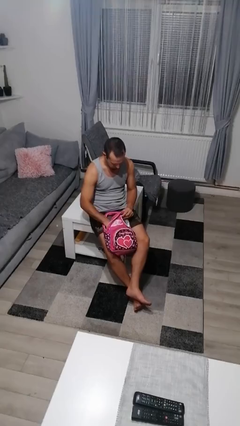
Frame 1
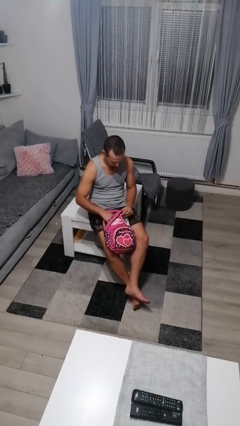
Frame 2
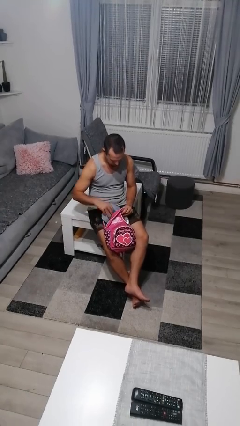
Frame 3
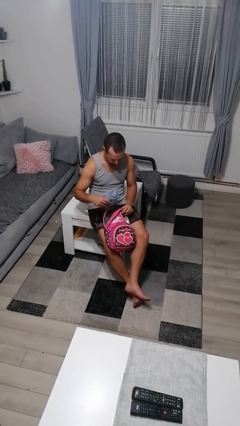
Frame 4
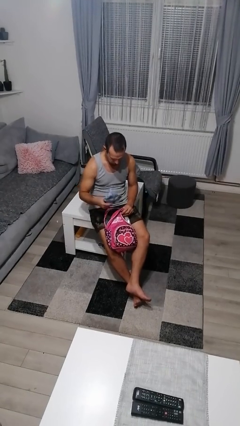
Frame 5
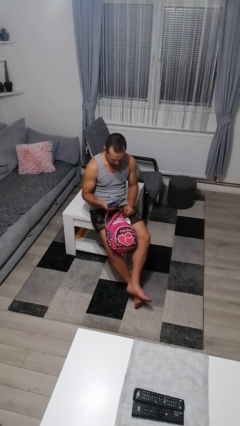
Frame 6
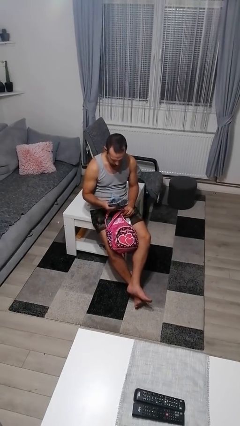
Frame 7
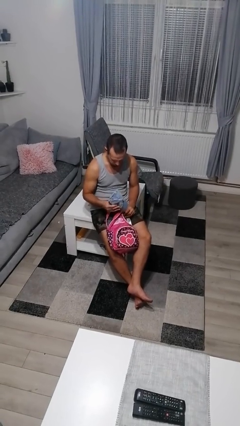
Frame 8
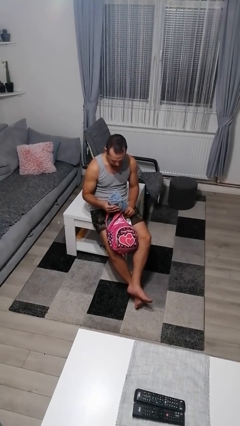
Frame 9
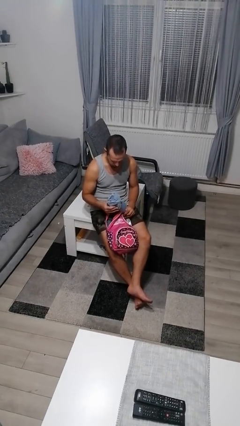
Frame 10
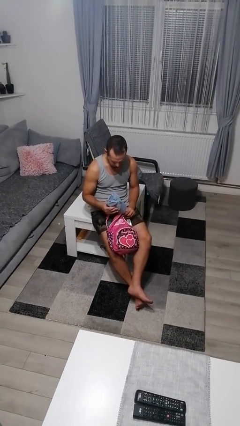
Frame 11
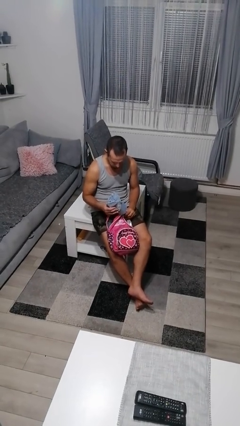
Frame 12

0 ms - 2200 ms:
person takes object from backpack

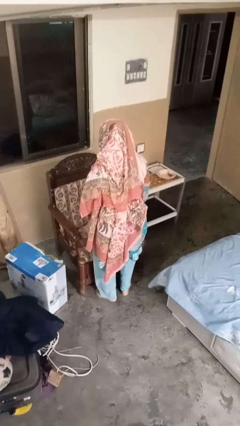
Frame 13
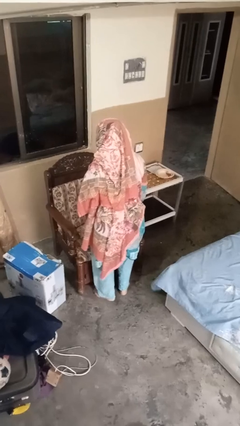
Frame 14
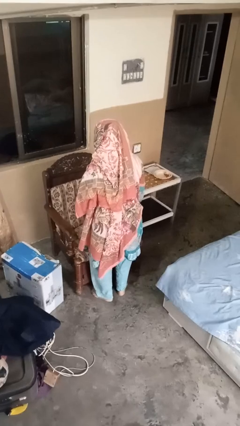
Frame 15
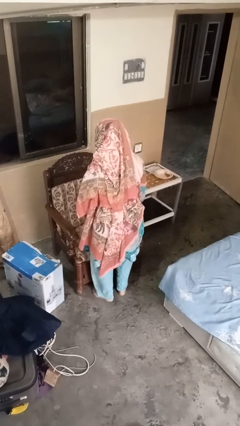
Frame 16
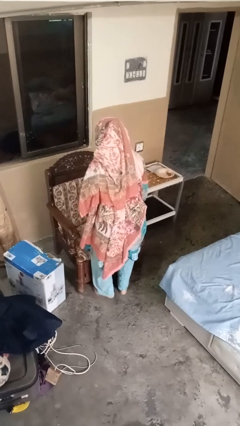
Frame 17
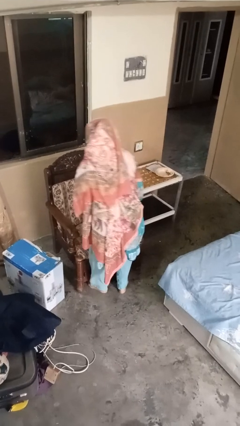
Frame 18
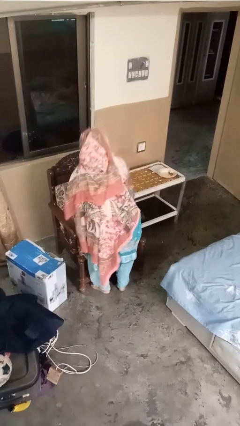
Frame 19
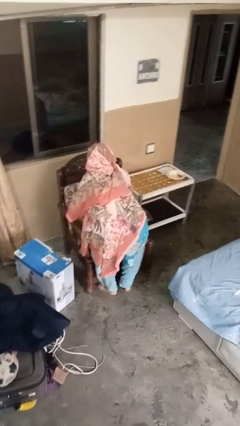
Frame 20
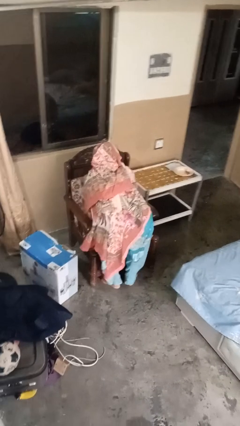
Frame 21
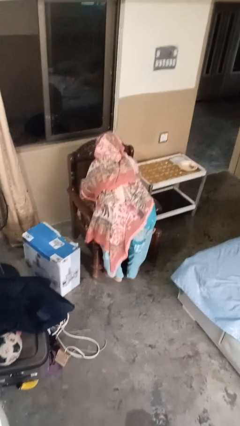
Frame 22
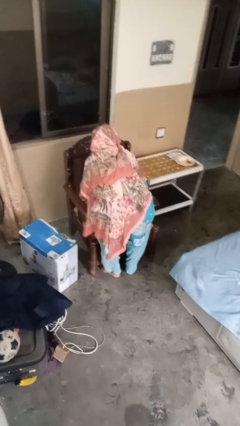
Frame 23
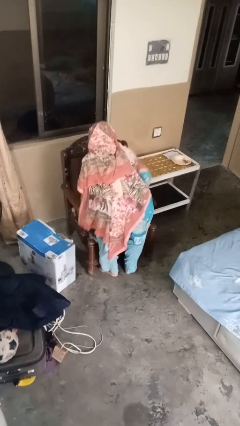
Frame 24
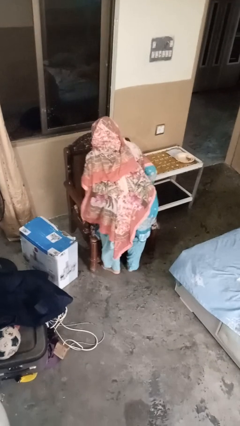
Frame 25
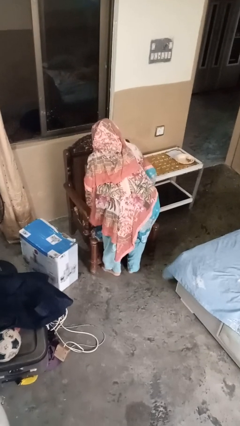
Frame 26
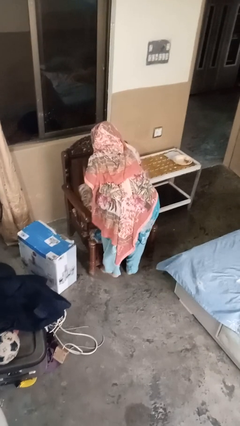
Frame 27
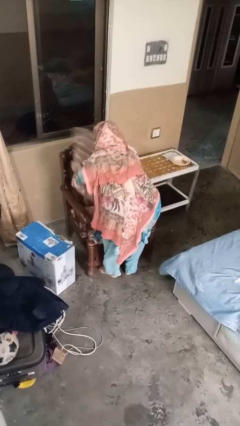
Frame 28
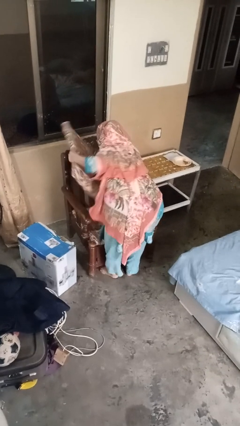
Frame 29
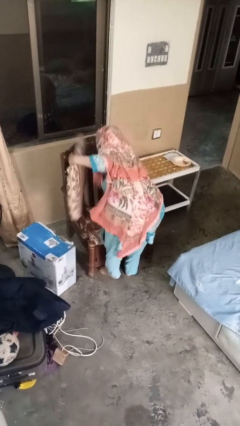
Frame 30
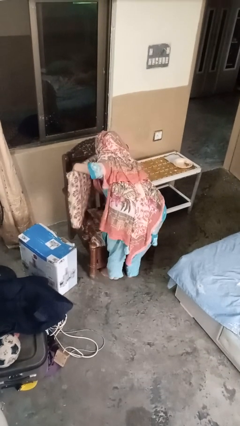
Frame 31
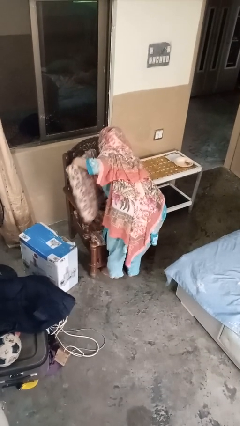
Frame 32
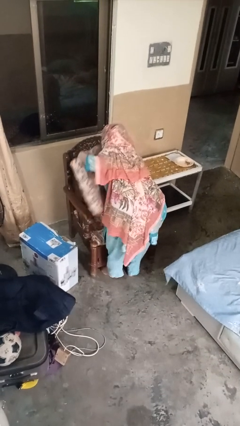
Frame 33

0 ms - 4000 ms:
person searches in couch

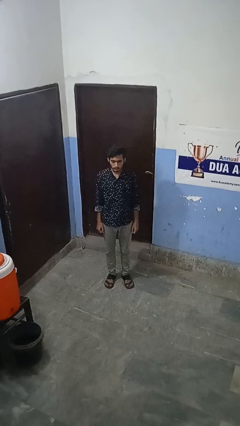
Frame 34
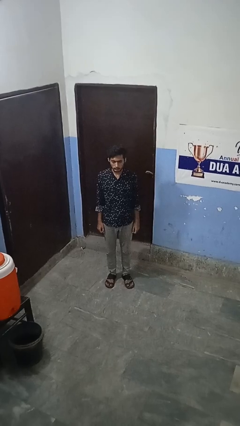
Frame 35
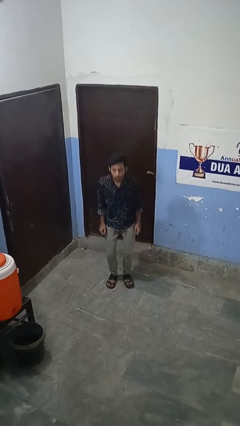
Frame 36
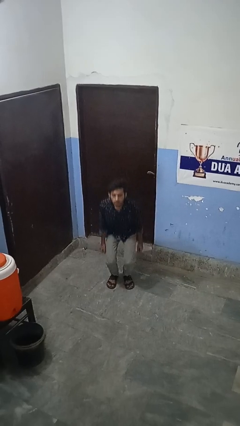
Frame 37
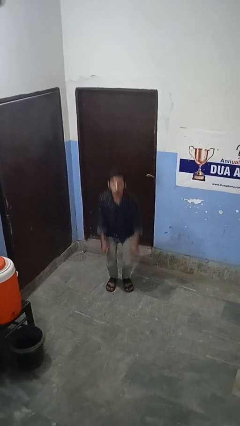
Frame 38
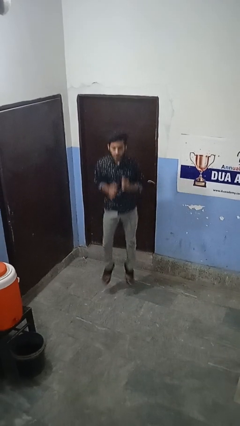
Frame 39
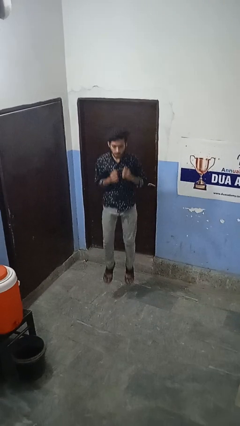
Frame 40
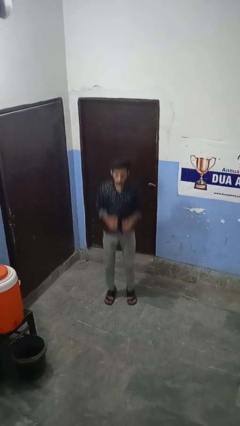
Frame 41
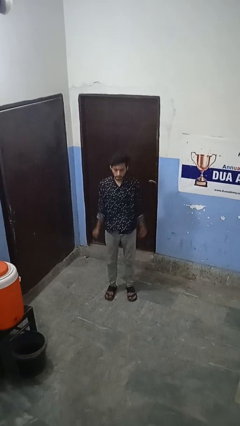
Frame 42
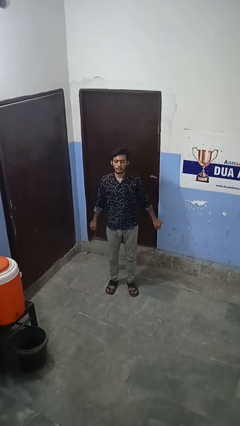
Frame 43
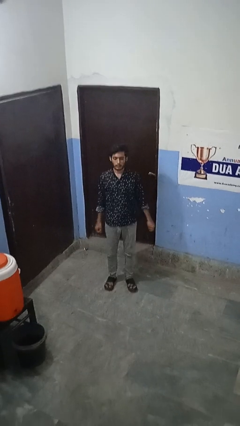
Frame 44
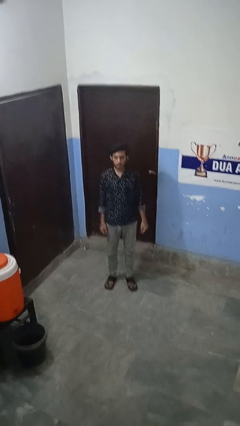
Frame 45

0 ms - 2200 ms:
person jumps

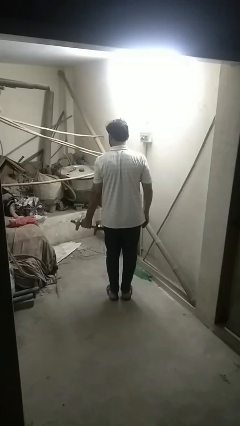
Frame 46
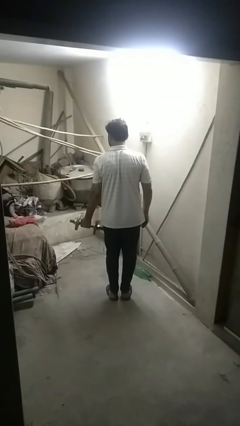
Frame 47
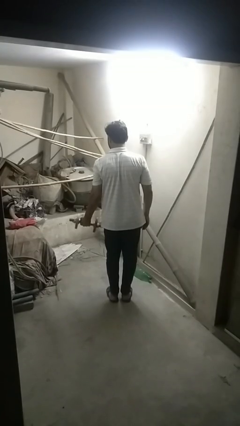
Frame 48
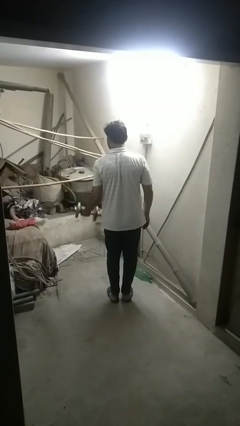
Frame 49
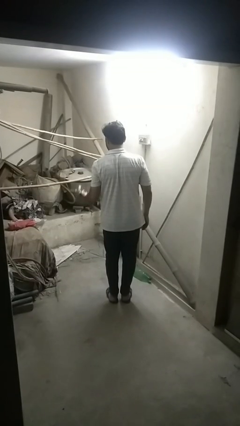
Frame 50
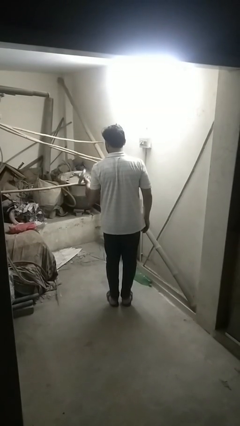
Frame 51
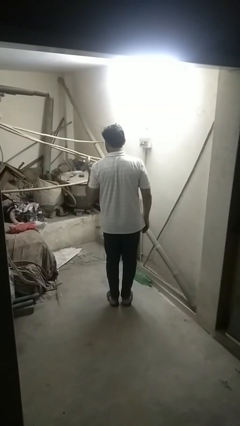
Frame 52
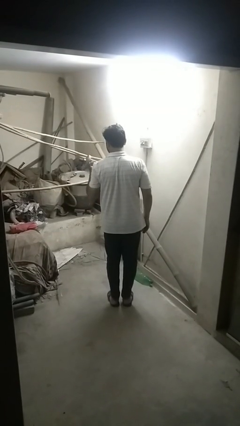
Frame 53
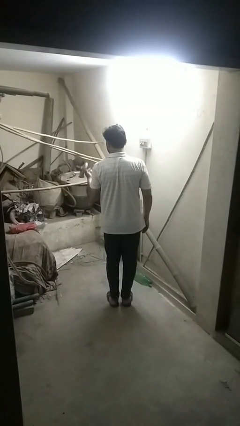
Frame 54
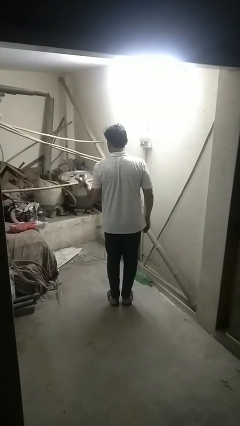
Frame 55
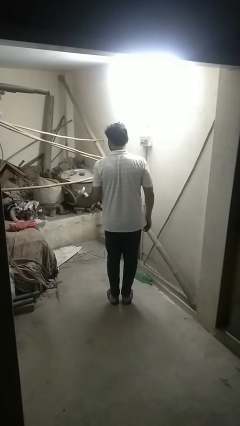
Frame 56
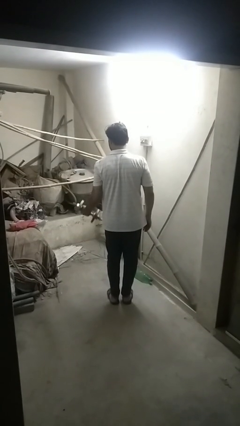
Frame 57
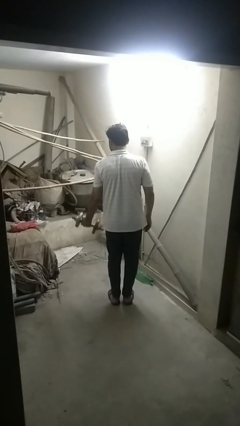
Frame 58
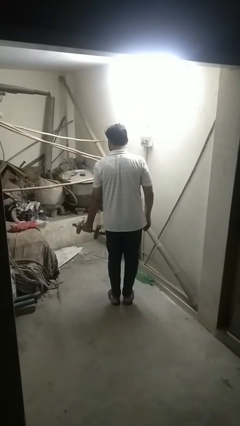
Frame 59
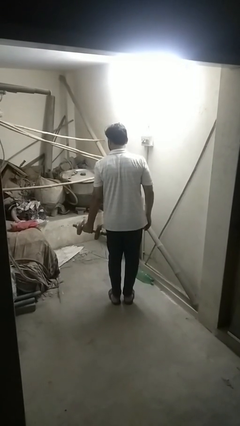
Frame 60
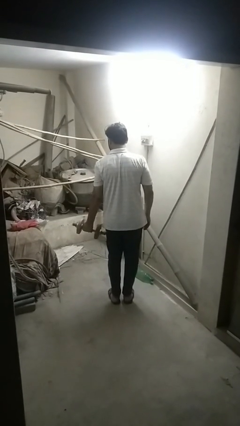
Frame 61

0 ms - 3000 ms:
person lifts dumbbells

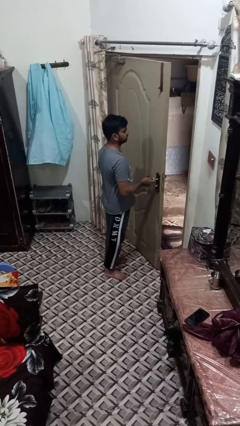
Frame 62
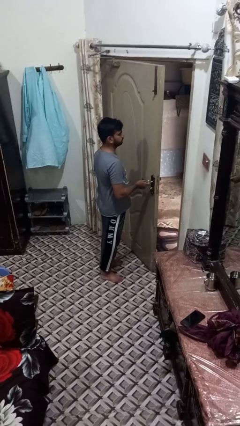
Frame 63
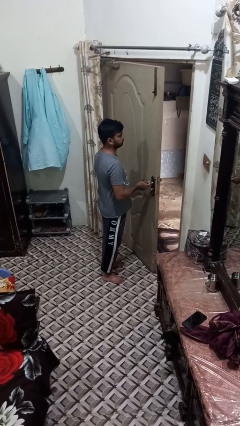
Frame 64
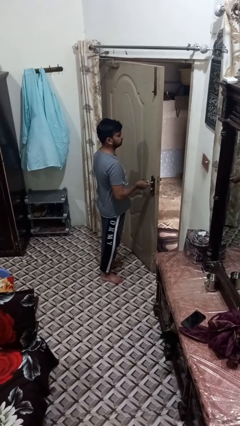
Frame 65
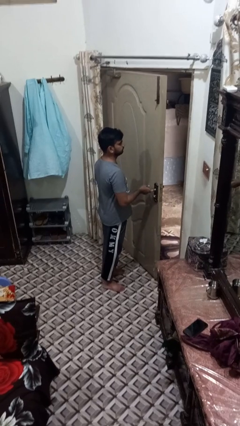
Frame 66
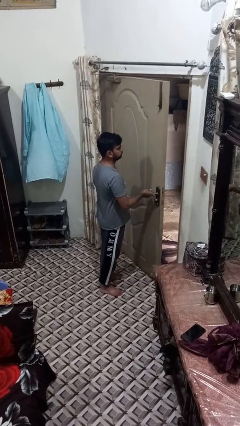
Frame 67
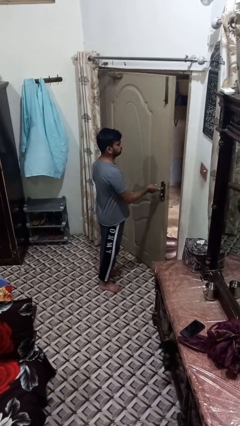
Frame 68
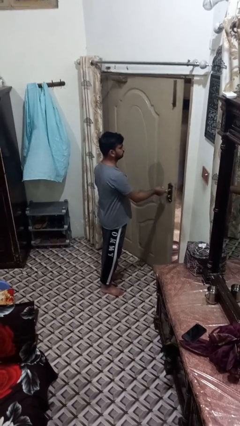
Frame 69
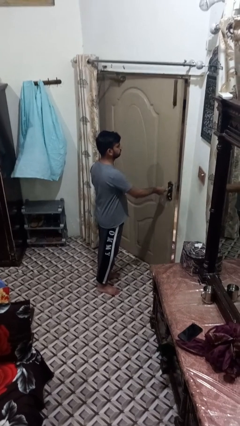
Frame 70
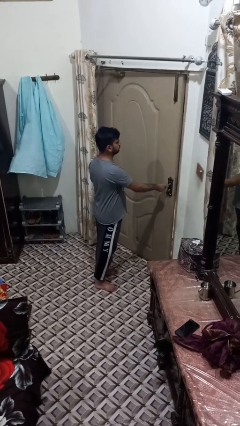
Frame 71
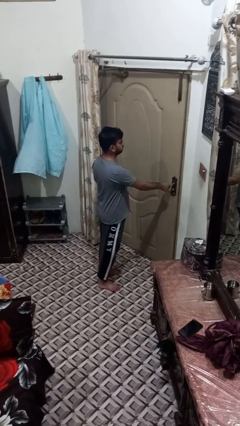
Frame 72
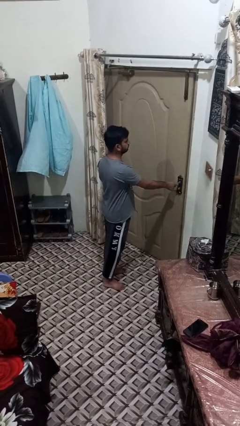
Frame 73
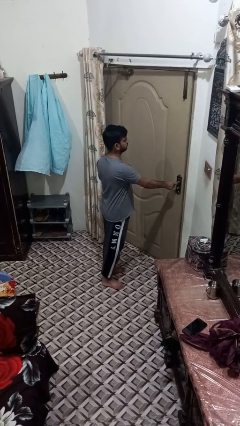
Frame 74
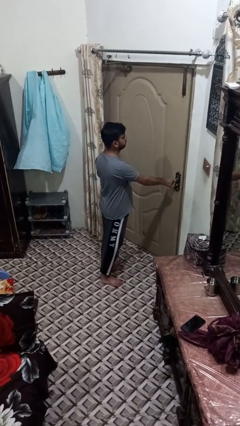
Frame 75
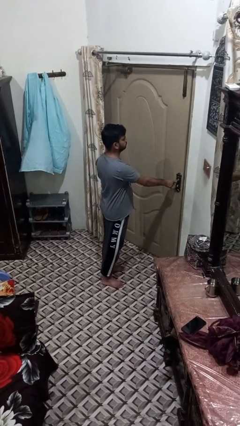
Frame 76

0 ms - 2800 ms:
person closes facility door

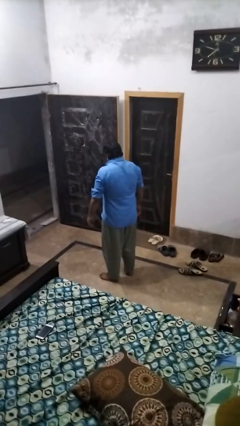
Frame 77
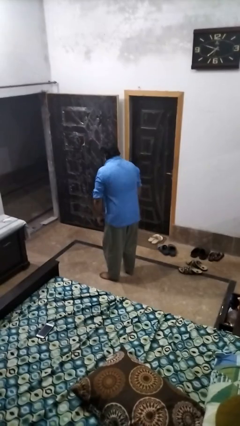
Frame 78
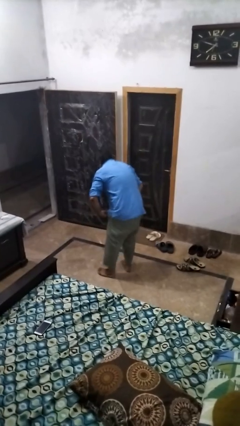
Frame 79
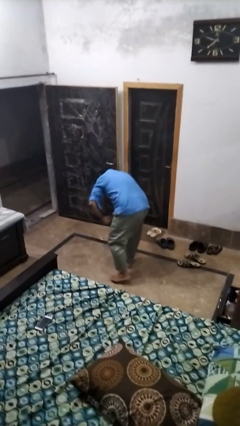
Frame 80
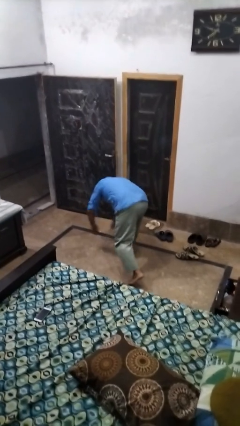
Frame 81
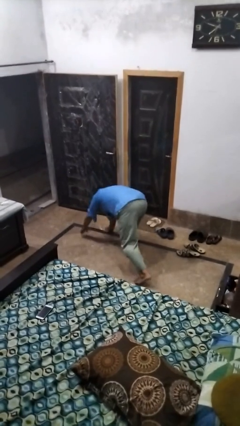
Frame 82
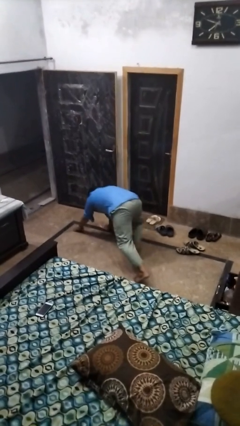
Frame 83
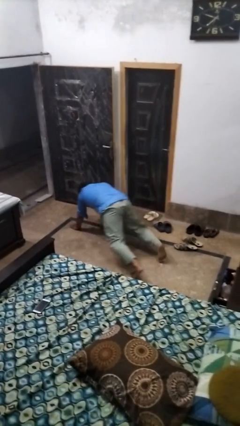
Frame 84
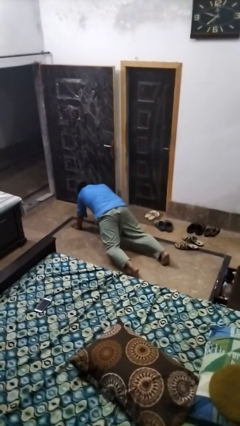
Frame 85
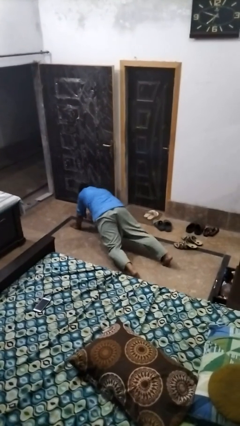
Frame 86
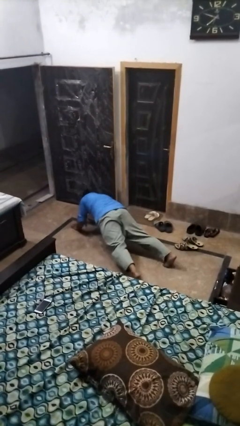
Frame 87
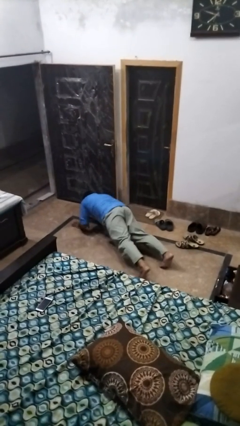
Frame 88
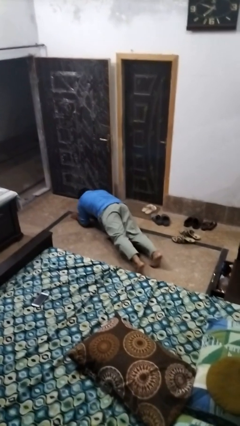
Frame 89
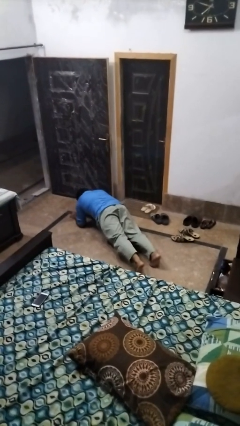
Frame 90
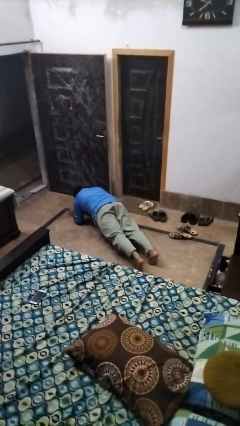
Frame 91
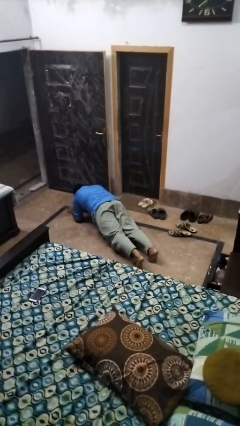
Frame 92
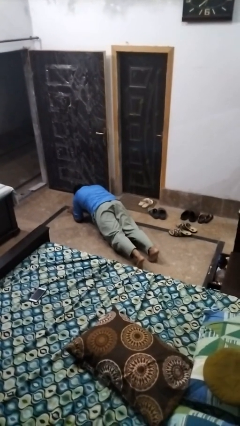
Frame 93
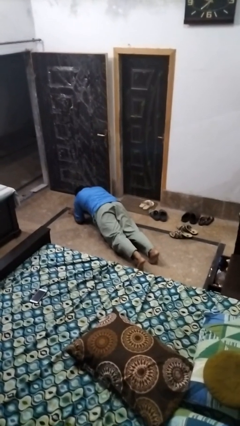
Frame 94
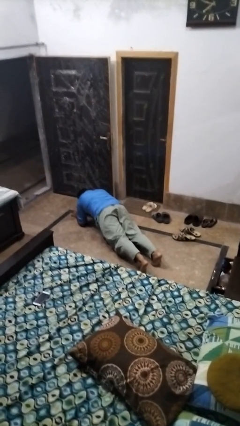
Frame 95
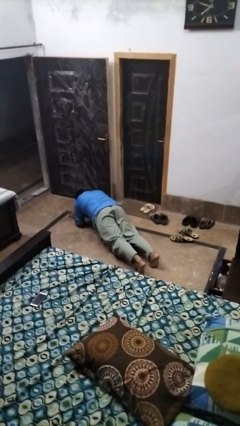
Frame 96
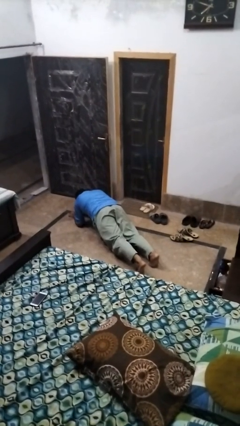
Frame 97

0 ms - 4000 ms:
person exercises with plank
